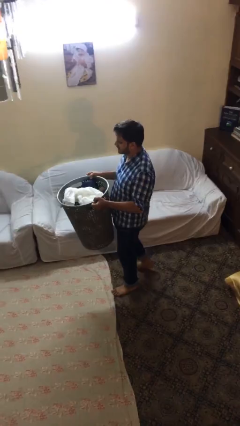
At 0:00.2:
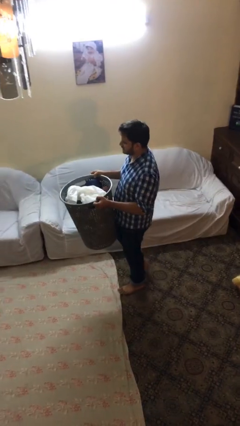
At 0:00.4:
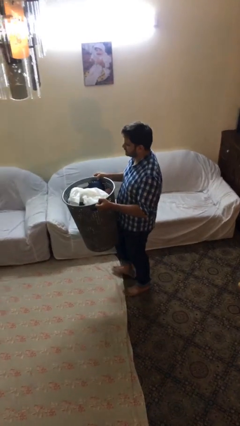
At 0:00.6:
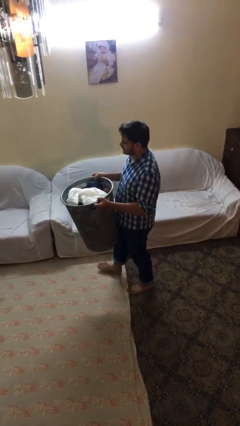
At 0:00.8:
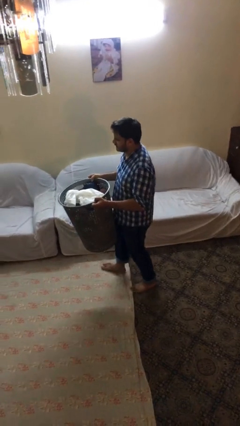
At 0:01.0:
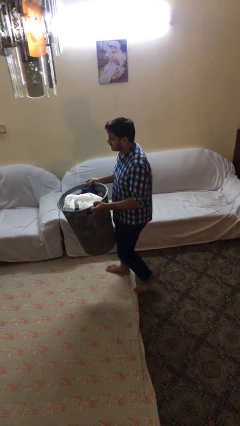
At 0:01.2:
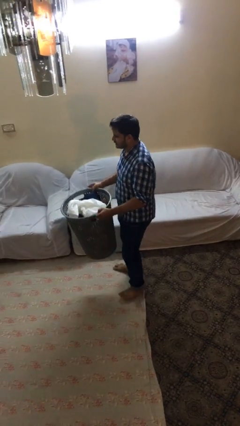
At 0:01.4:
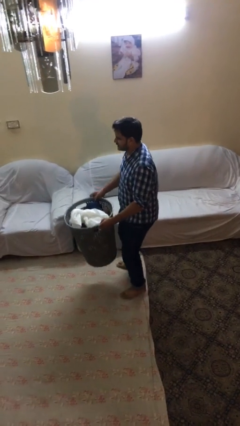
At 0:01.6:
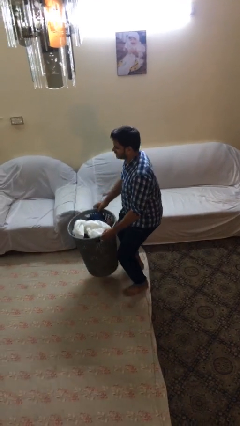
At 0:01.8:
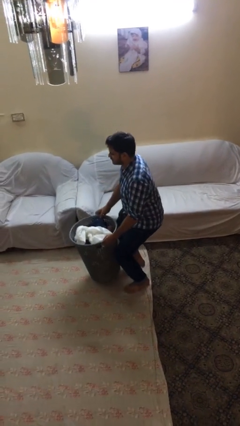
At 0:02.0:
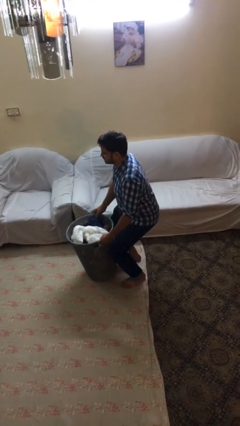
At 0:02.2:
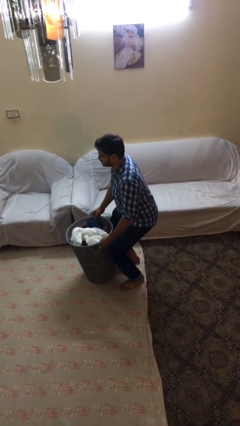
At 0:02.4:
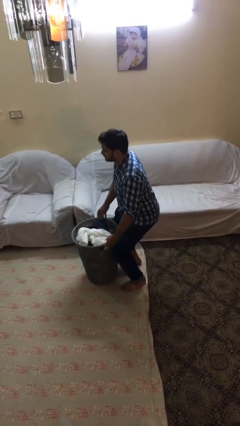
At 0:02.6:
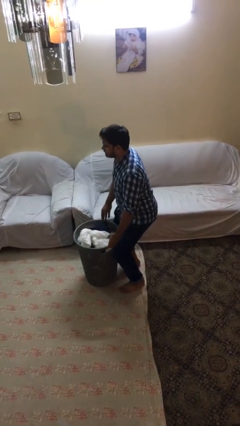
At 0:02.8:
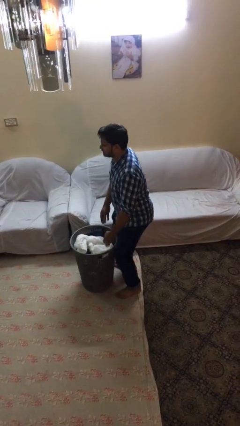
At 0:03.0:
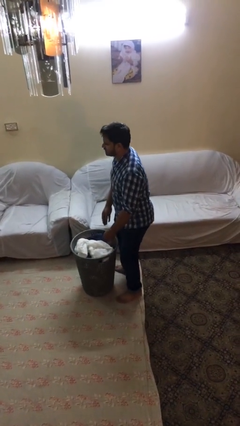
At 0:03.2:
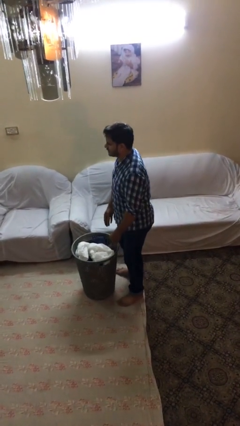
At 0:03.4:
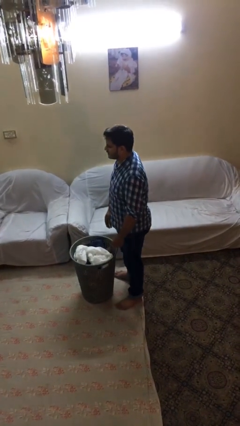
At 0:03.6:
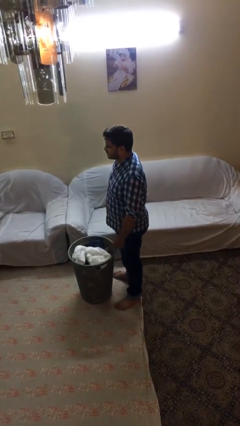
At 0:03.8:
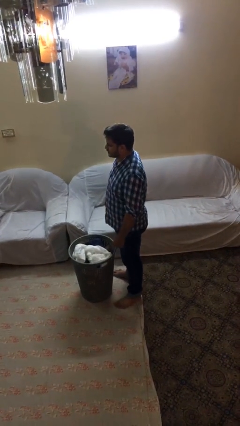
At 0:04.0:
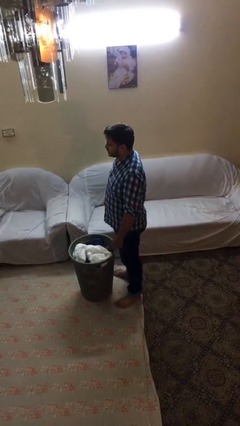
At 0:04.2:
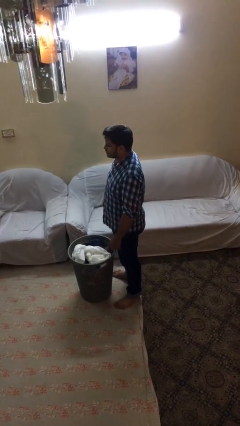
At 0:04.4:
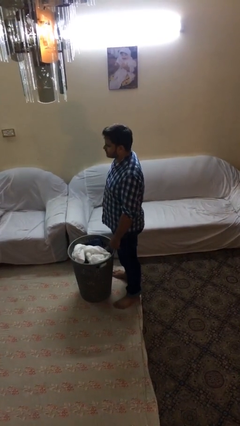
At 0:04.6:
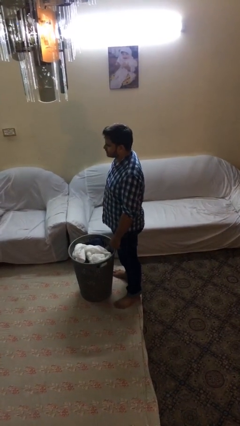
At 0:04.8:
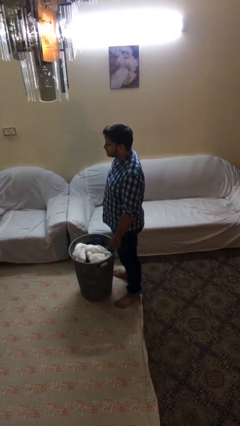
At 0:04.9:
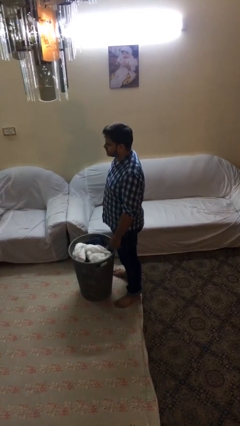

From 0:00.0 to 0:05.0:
person puts down object on floor

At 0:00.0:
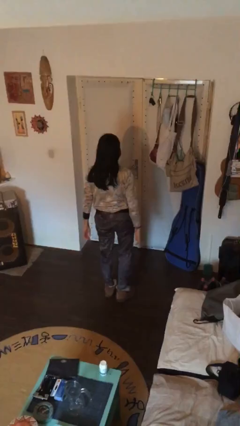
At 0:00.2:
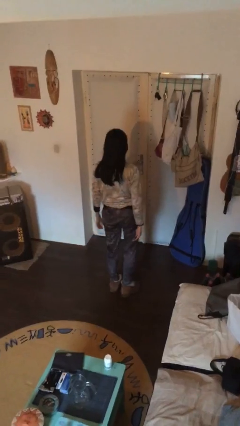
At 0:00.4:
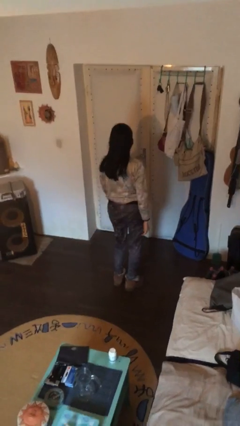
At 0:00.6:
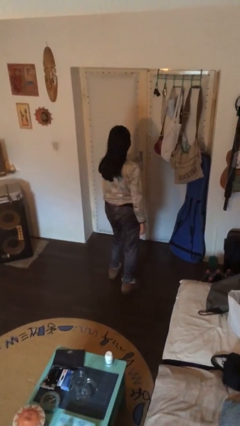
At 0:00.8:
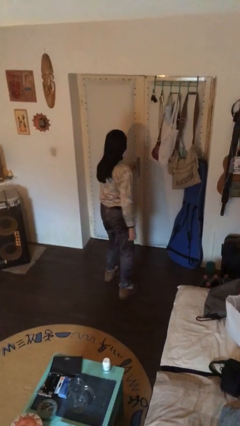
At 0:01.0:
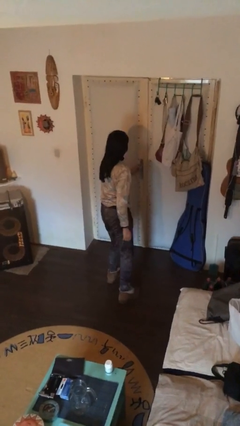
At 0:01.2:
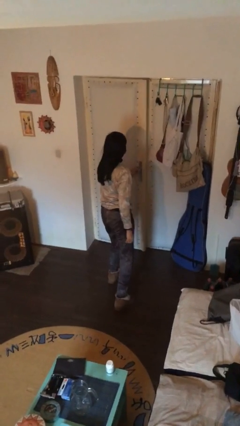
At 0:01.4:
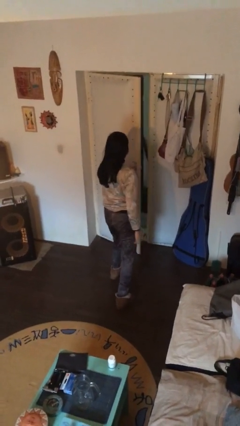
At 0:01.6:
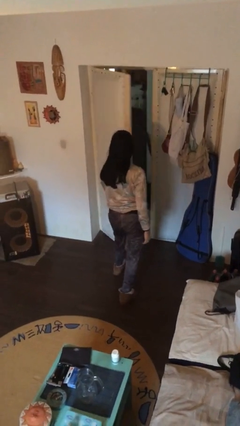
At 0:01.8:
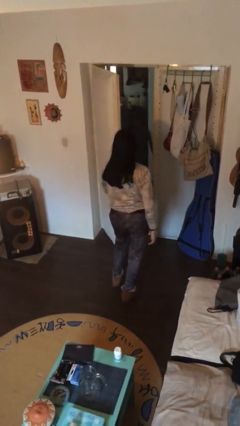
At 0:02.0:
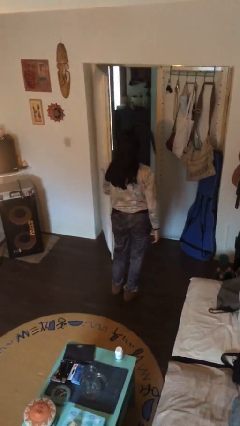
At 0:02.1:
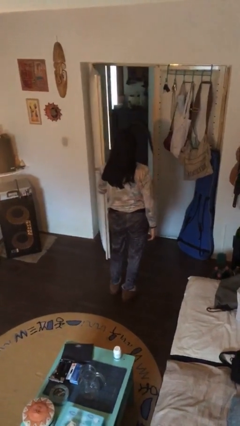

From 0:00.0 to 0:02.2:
person opens facility door

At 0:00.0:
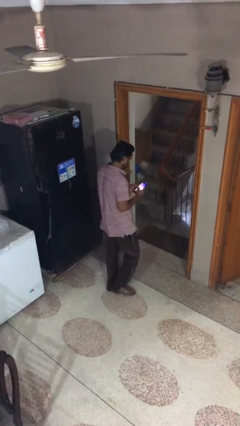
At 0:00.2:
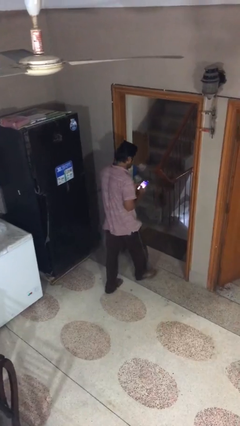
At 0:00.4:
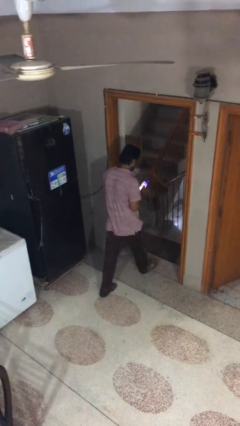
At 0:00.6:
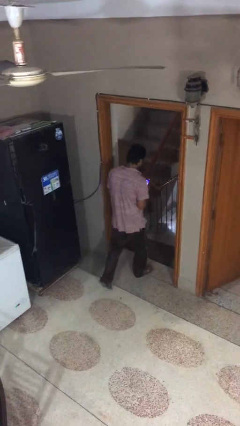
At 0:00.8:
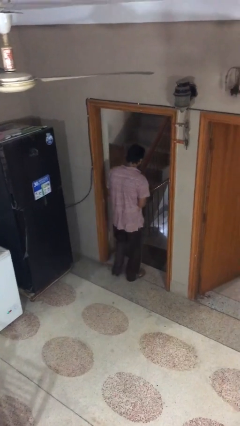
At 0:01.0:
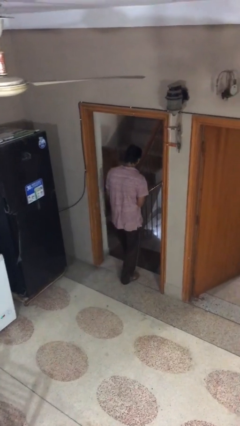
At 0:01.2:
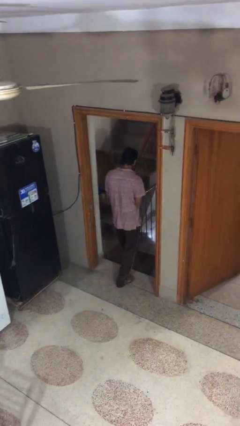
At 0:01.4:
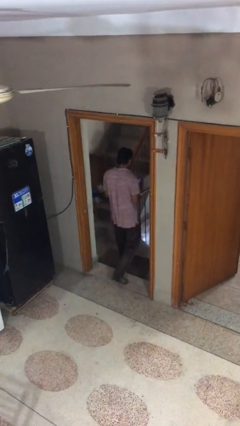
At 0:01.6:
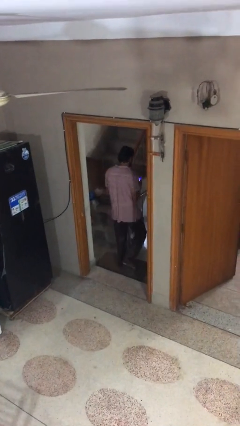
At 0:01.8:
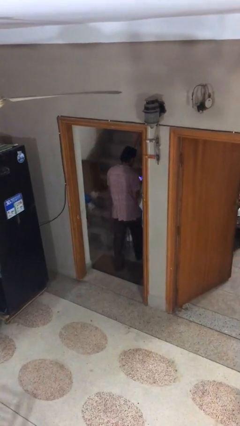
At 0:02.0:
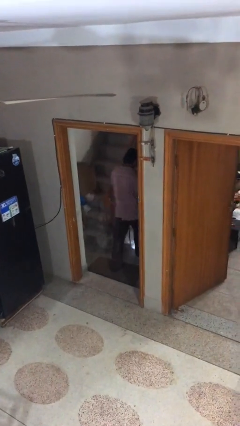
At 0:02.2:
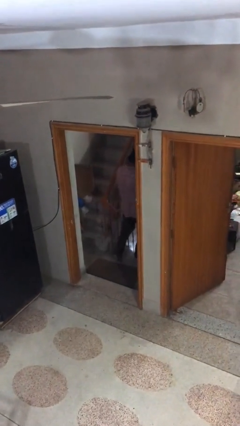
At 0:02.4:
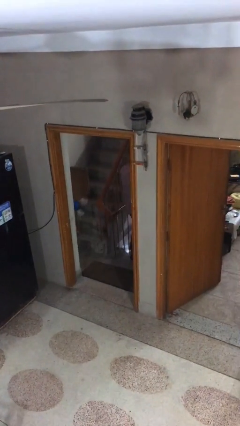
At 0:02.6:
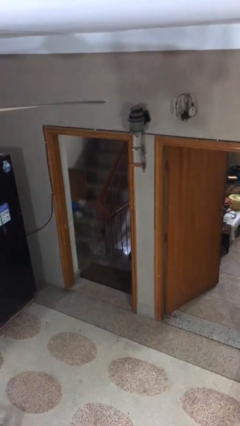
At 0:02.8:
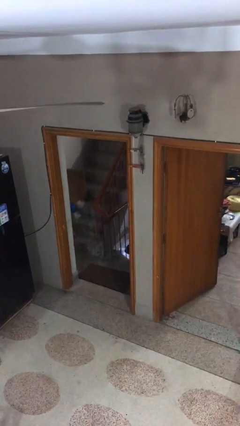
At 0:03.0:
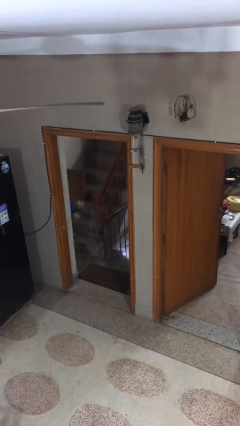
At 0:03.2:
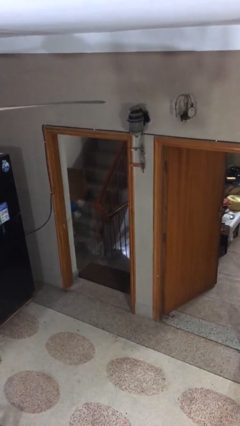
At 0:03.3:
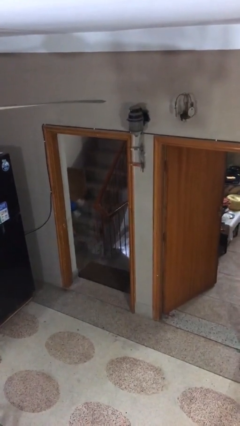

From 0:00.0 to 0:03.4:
person exits scene through structure

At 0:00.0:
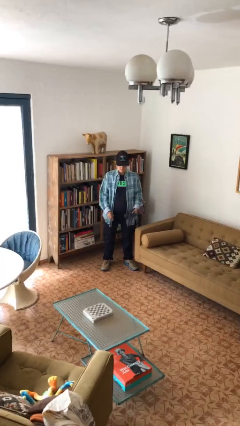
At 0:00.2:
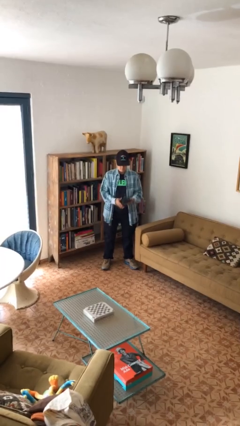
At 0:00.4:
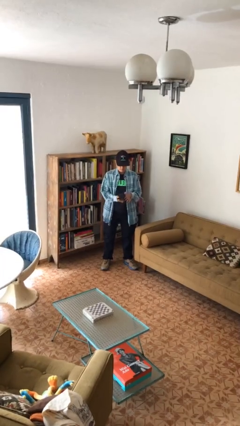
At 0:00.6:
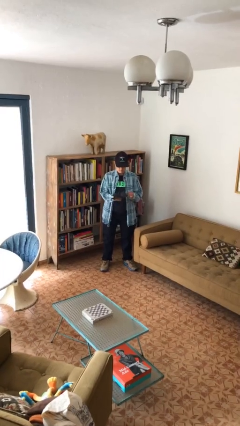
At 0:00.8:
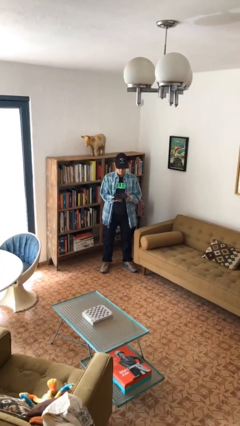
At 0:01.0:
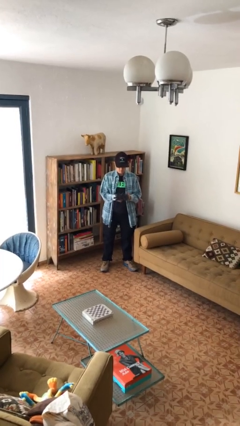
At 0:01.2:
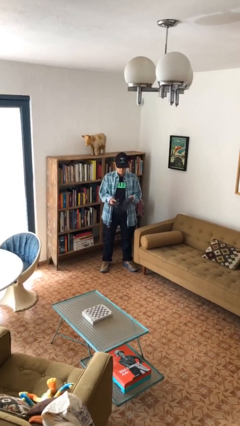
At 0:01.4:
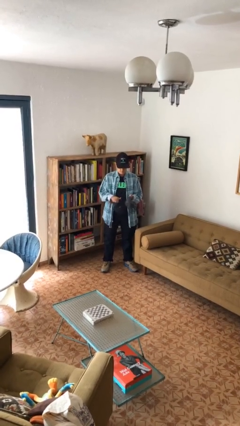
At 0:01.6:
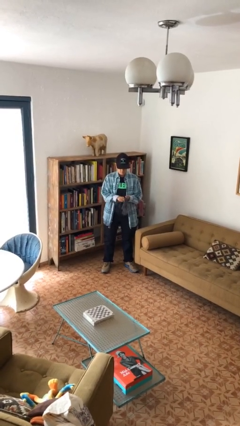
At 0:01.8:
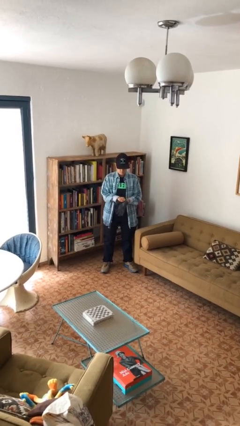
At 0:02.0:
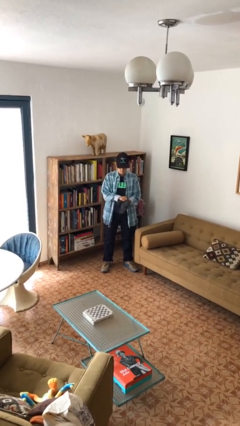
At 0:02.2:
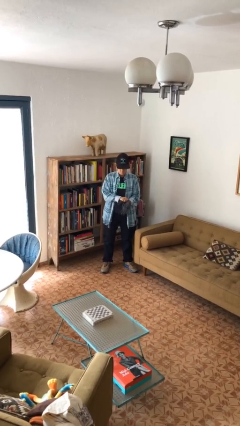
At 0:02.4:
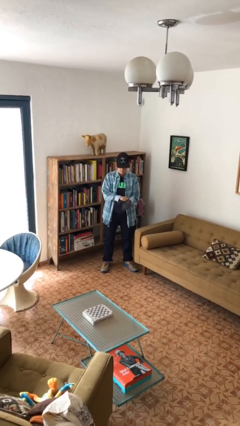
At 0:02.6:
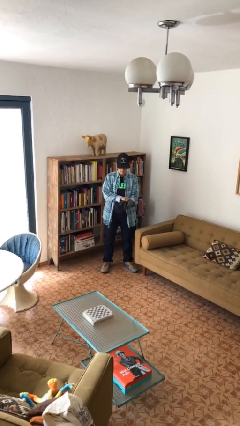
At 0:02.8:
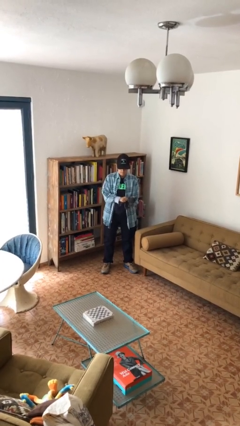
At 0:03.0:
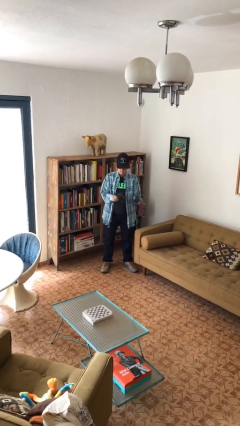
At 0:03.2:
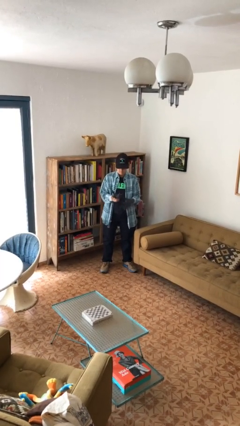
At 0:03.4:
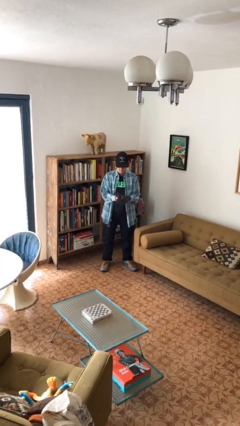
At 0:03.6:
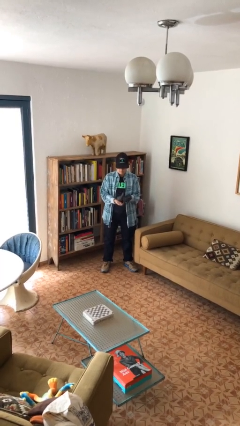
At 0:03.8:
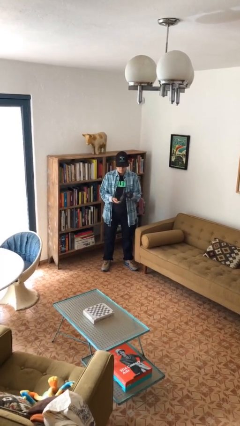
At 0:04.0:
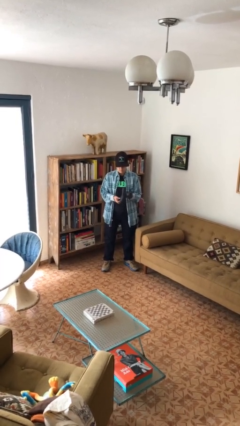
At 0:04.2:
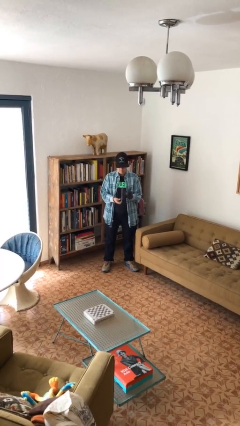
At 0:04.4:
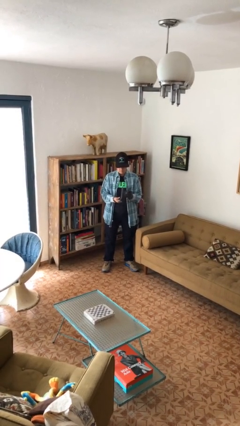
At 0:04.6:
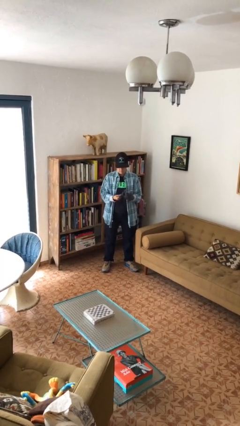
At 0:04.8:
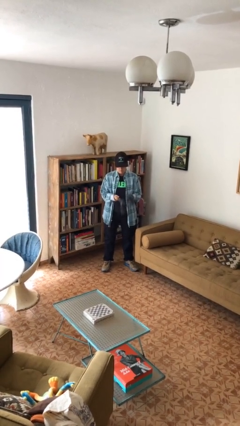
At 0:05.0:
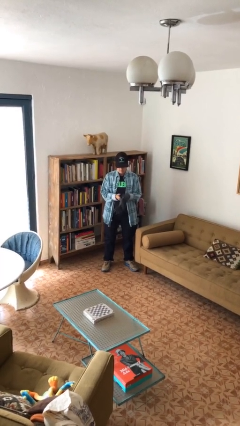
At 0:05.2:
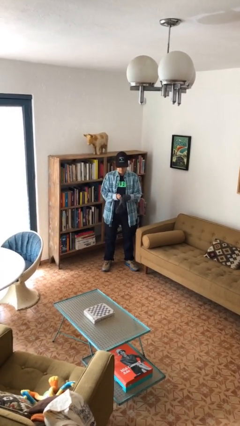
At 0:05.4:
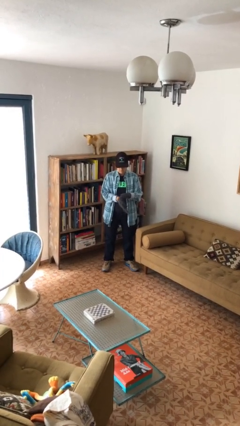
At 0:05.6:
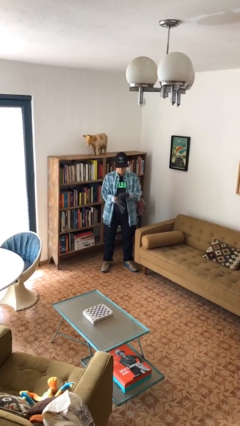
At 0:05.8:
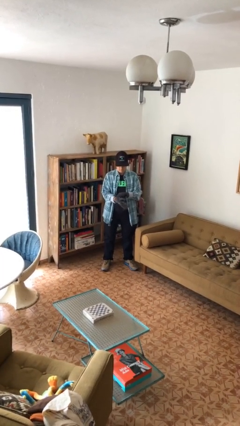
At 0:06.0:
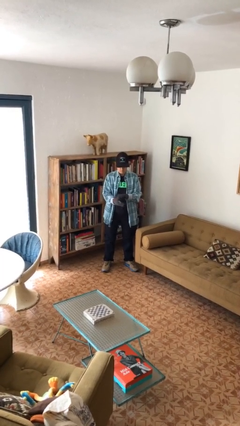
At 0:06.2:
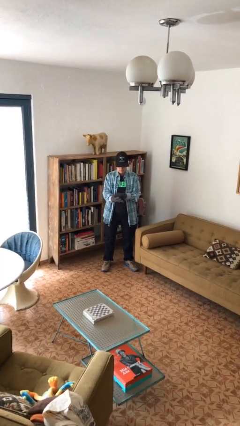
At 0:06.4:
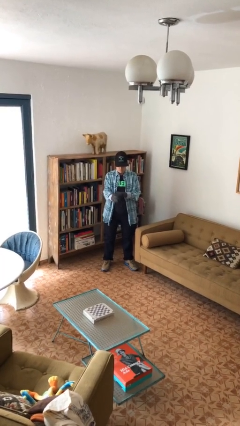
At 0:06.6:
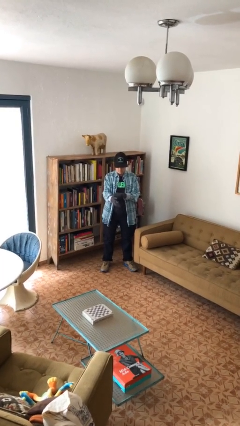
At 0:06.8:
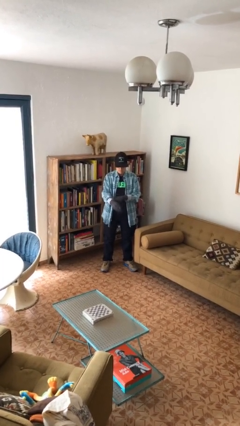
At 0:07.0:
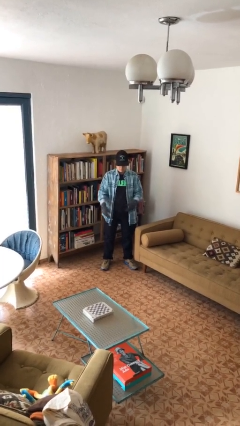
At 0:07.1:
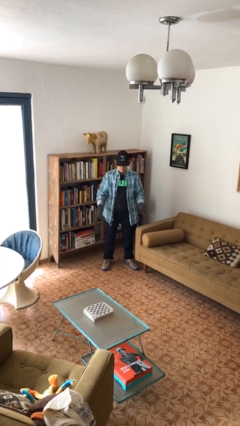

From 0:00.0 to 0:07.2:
person puts on gloves
